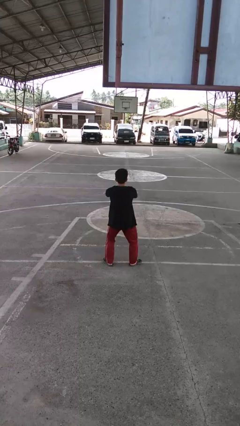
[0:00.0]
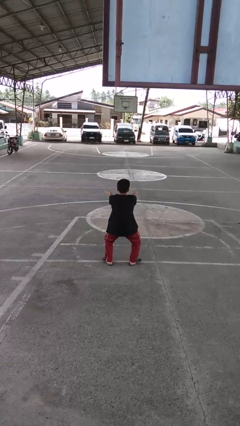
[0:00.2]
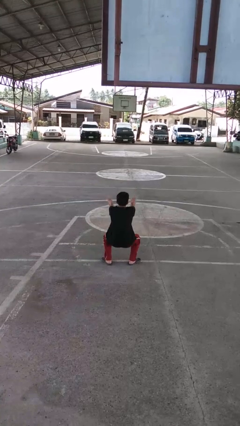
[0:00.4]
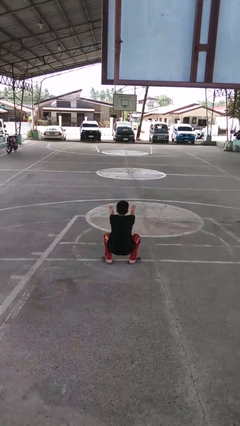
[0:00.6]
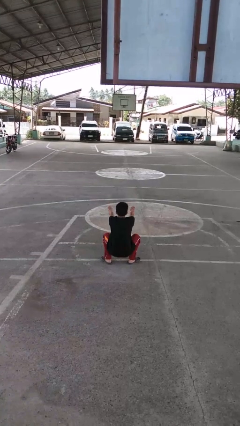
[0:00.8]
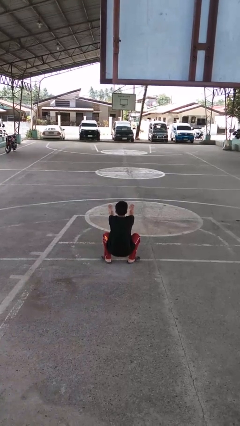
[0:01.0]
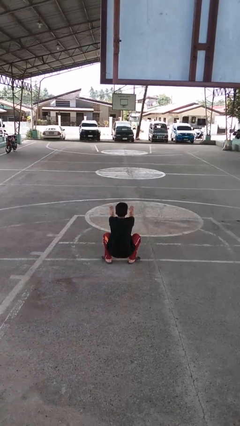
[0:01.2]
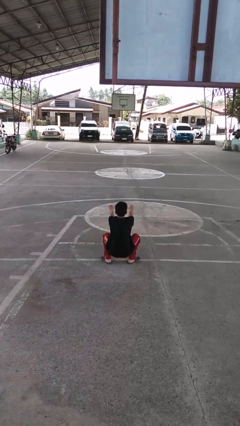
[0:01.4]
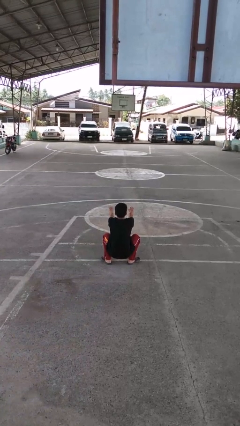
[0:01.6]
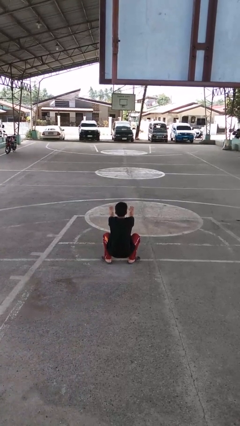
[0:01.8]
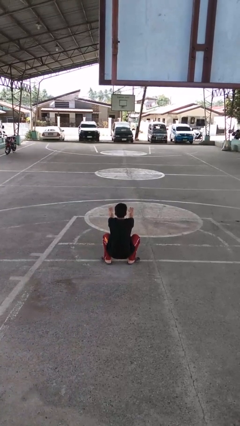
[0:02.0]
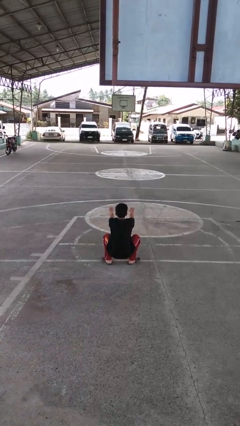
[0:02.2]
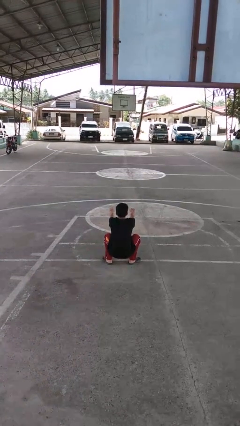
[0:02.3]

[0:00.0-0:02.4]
person squats

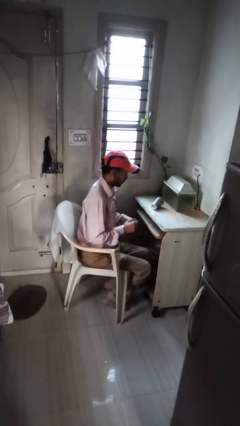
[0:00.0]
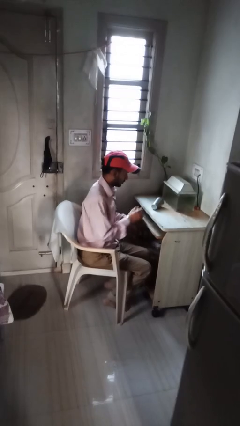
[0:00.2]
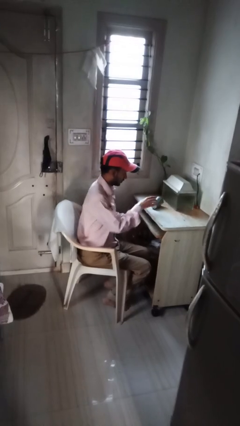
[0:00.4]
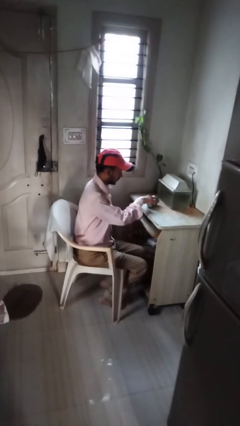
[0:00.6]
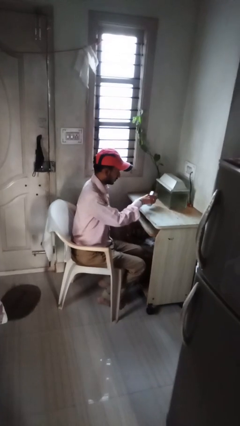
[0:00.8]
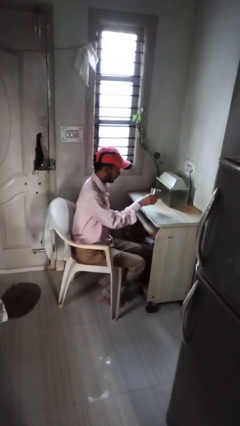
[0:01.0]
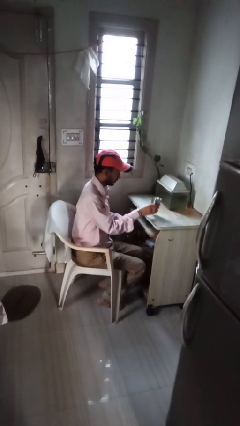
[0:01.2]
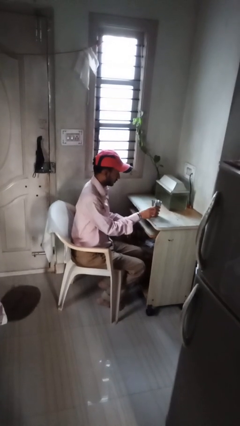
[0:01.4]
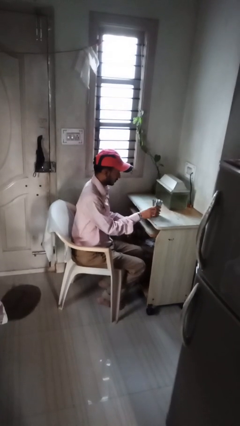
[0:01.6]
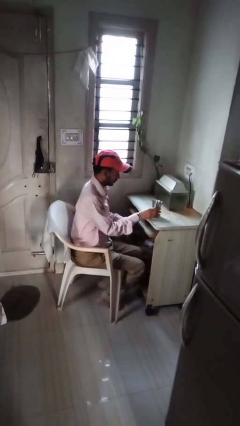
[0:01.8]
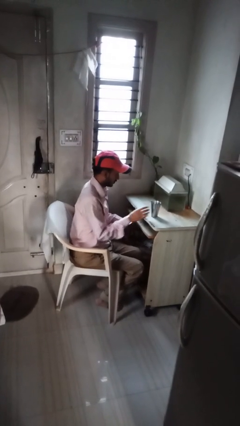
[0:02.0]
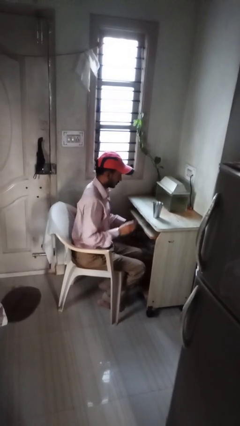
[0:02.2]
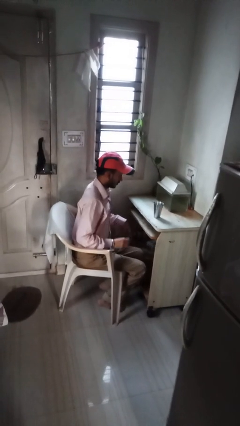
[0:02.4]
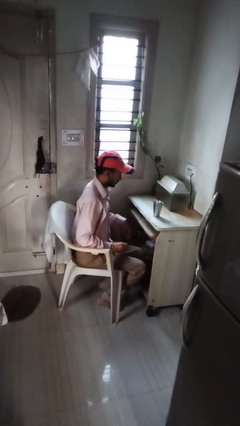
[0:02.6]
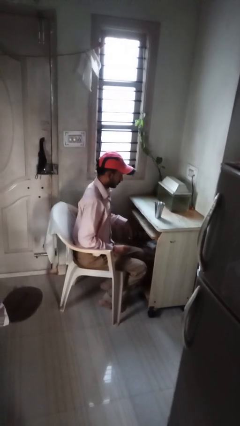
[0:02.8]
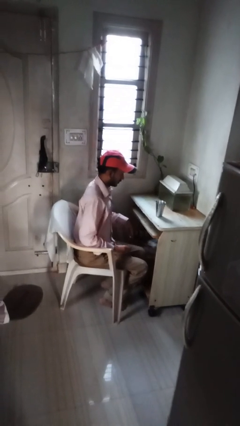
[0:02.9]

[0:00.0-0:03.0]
person sets upright glass

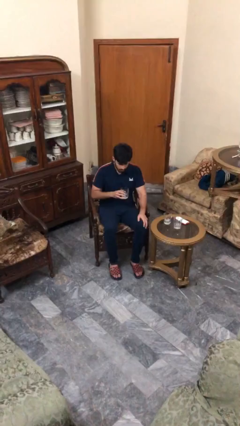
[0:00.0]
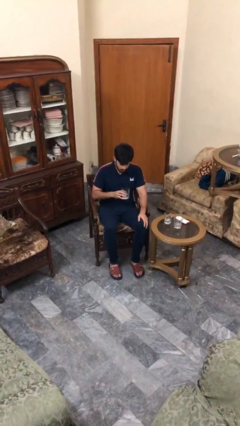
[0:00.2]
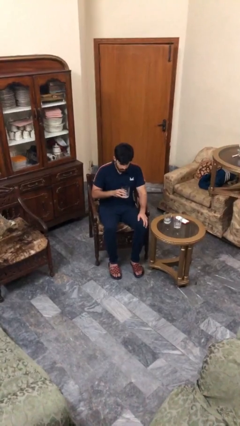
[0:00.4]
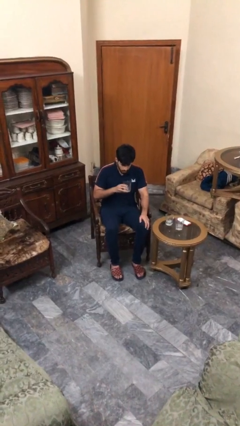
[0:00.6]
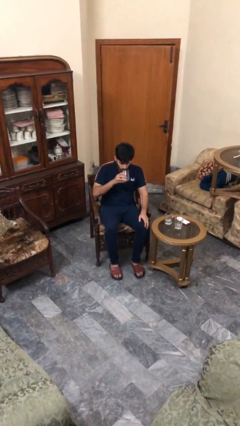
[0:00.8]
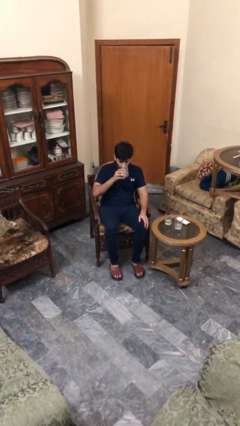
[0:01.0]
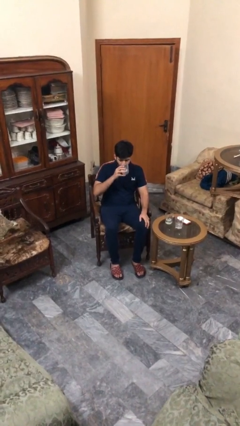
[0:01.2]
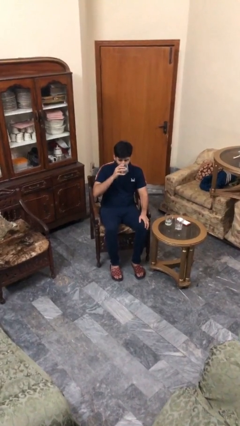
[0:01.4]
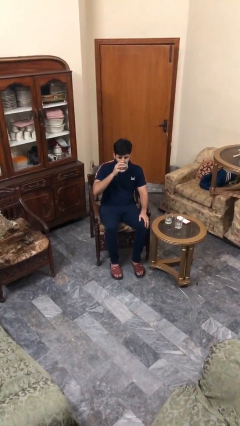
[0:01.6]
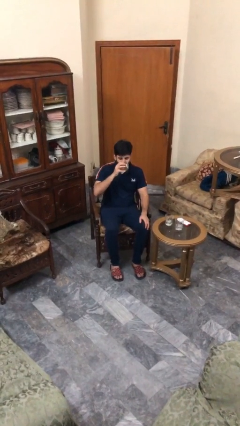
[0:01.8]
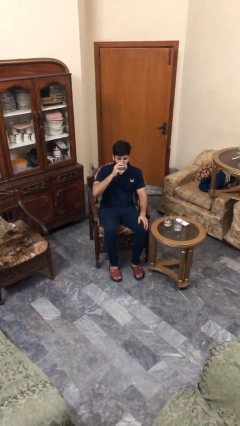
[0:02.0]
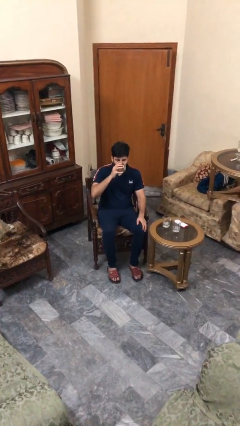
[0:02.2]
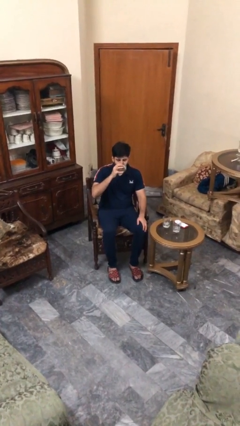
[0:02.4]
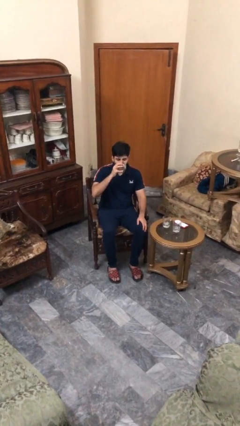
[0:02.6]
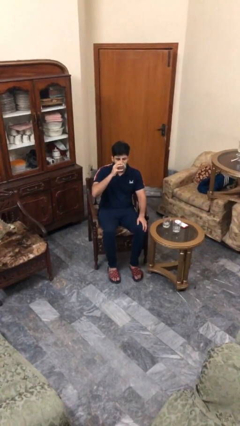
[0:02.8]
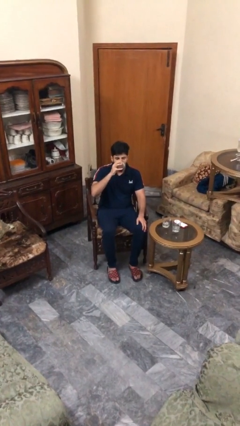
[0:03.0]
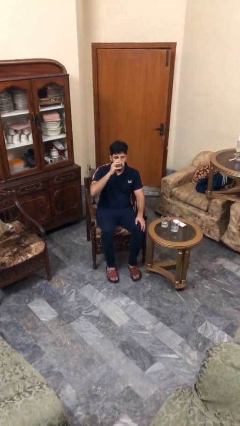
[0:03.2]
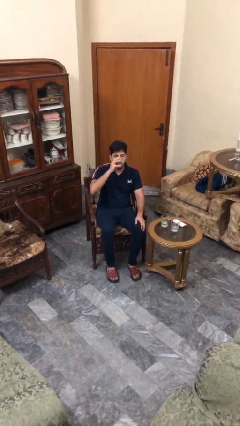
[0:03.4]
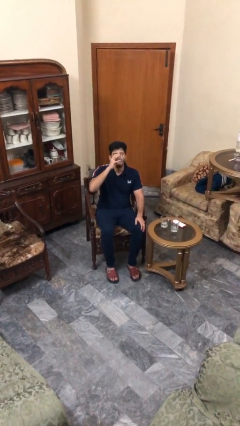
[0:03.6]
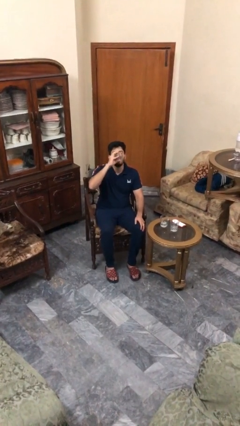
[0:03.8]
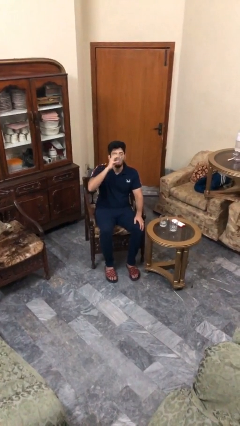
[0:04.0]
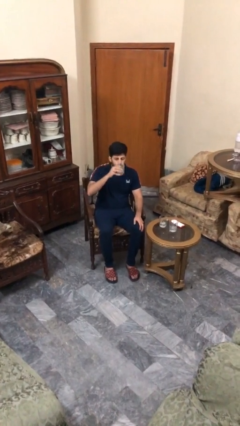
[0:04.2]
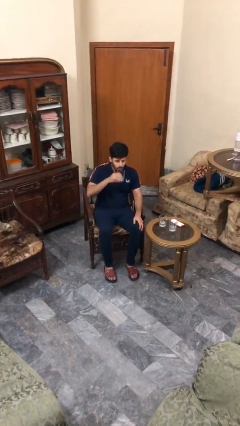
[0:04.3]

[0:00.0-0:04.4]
person drinks from shotglass

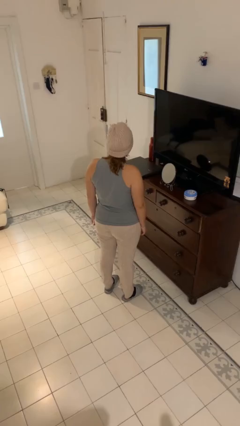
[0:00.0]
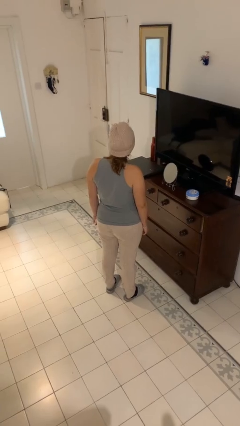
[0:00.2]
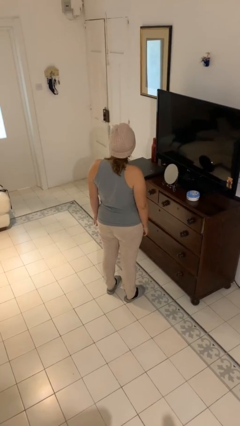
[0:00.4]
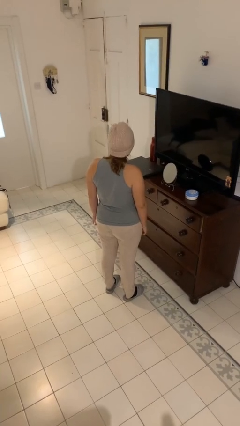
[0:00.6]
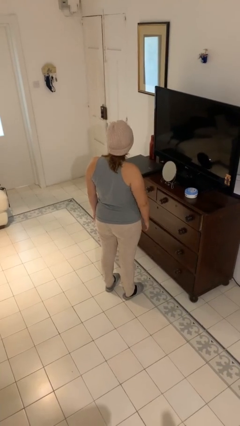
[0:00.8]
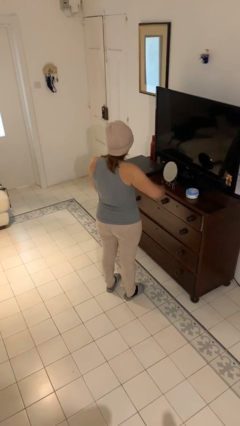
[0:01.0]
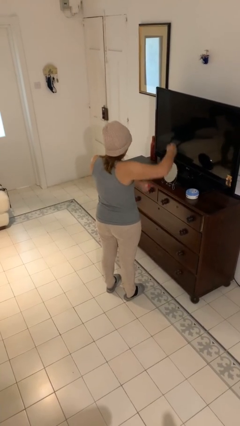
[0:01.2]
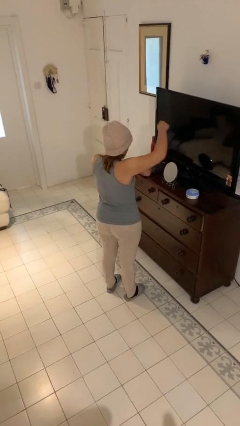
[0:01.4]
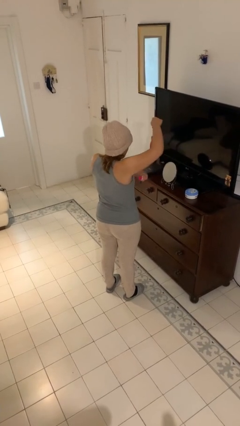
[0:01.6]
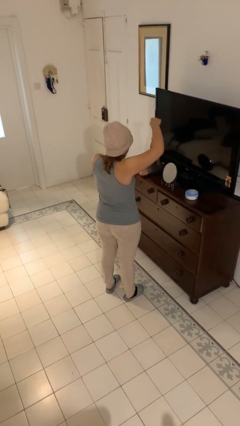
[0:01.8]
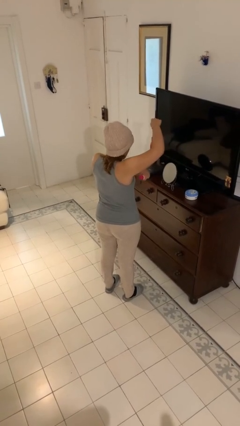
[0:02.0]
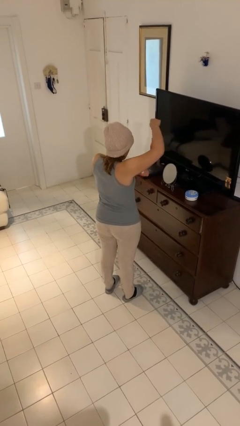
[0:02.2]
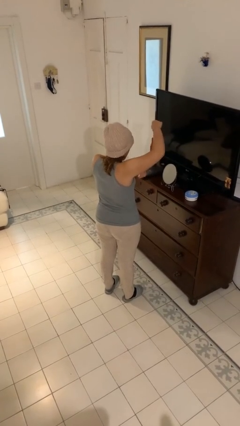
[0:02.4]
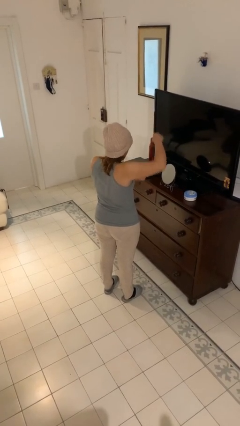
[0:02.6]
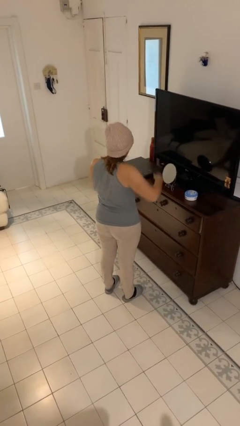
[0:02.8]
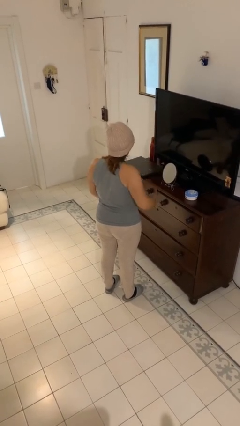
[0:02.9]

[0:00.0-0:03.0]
person applies deodorant

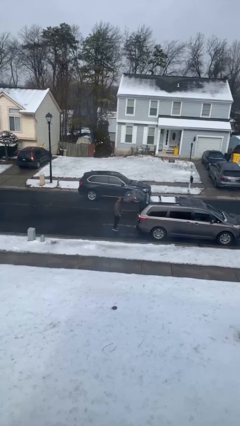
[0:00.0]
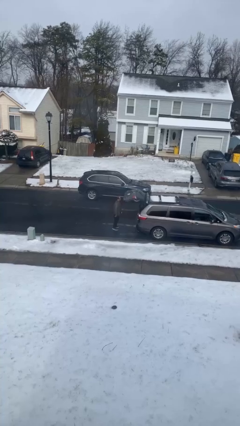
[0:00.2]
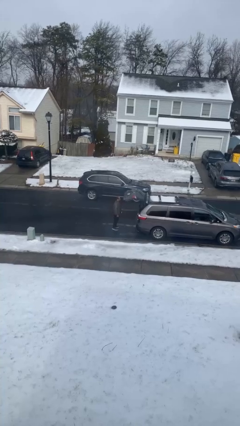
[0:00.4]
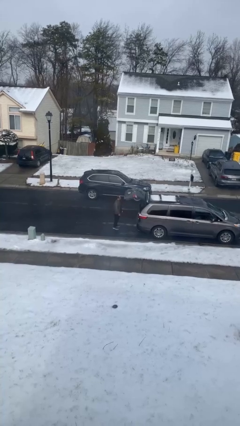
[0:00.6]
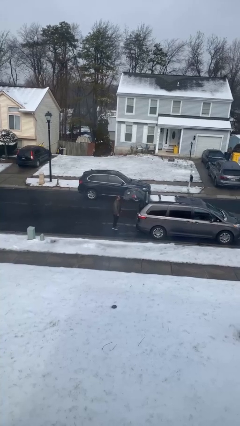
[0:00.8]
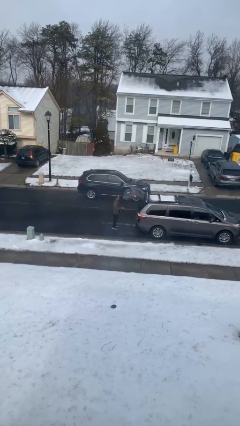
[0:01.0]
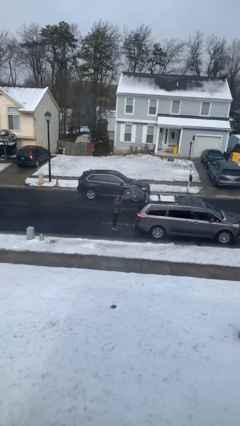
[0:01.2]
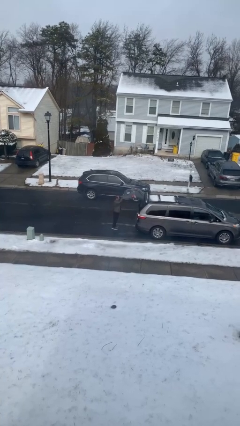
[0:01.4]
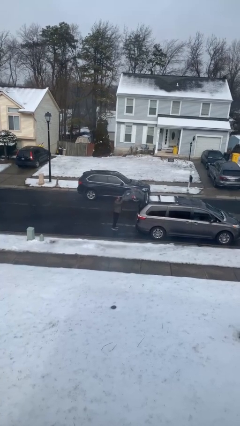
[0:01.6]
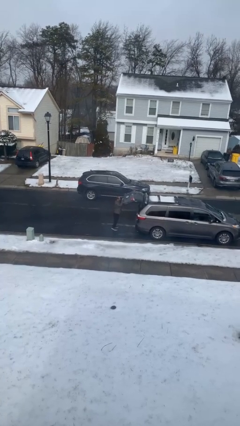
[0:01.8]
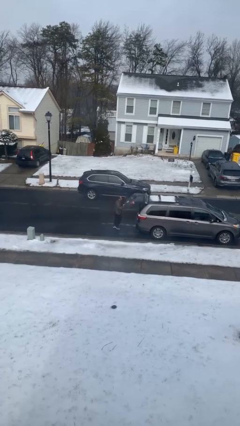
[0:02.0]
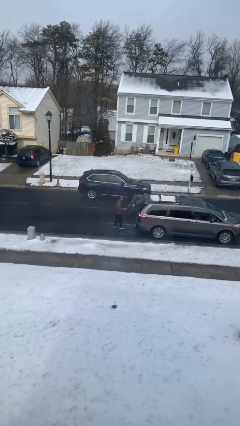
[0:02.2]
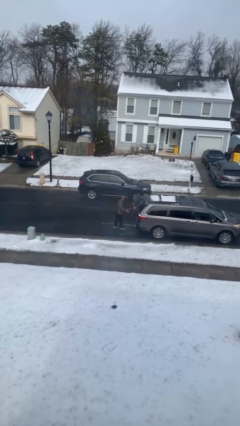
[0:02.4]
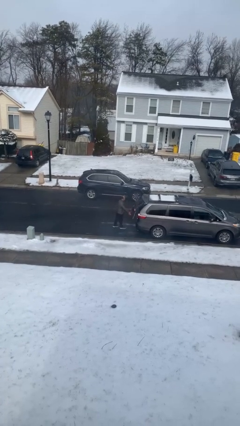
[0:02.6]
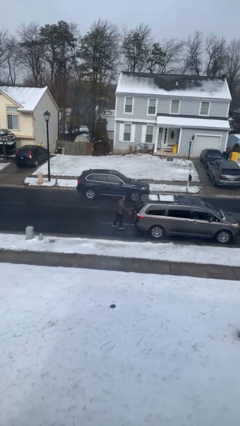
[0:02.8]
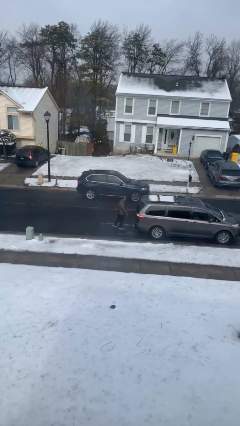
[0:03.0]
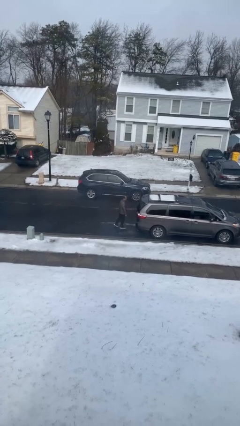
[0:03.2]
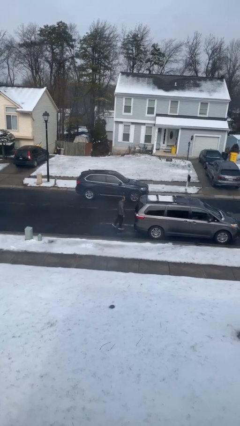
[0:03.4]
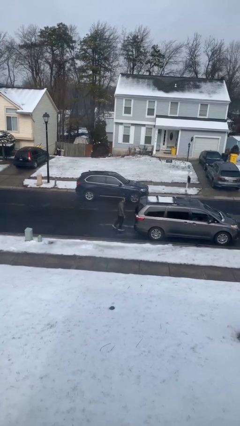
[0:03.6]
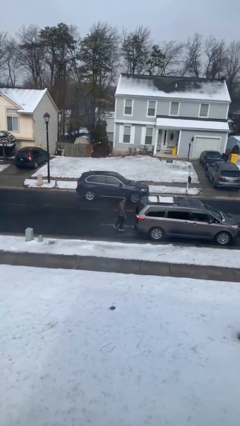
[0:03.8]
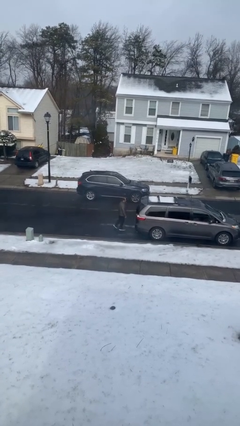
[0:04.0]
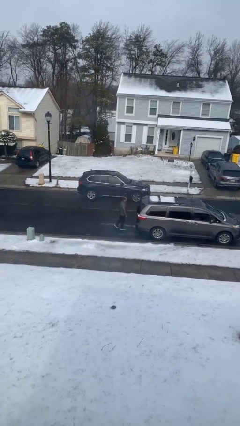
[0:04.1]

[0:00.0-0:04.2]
person closes car trunk

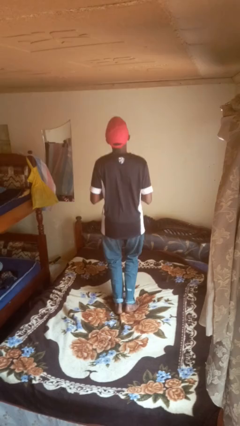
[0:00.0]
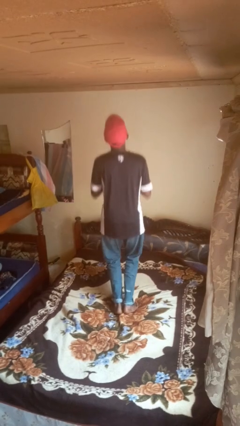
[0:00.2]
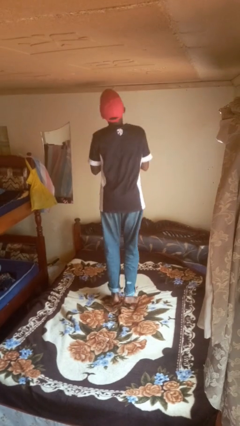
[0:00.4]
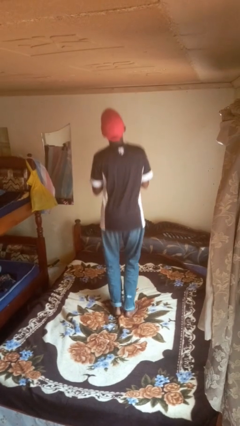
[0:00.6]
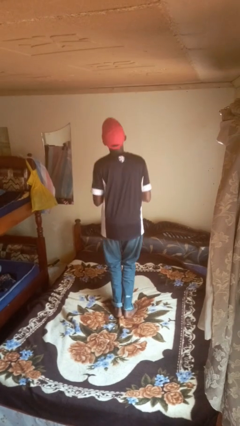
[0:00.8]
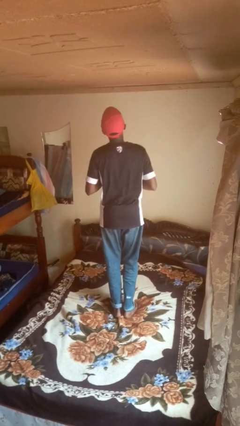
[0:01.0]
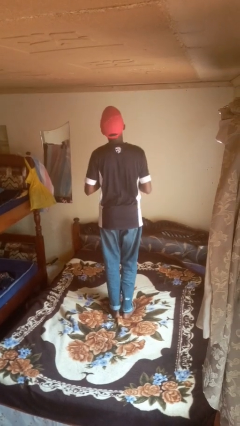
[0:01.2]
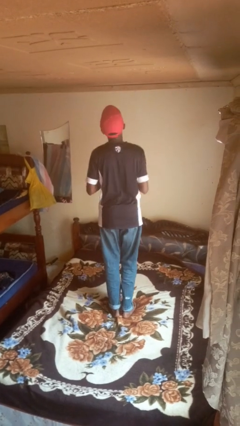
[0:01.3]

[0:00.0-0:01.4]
person jumps on bed
